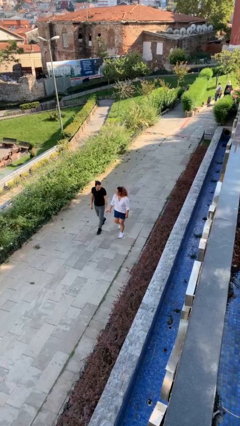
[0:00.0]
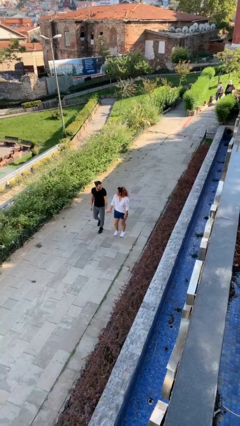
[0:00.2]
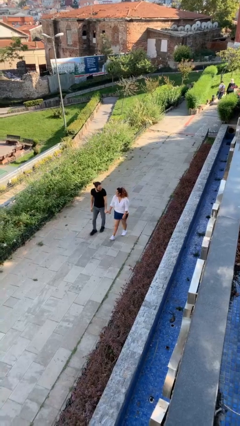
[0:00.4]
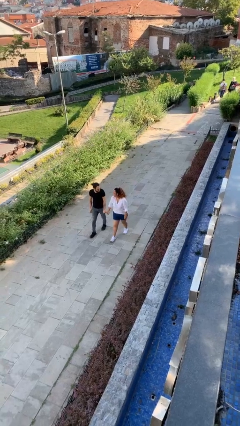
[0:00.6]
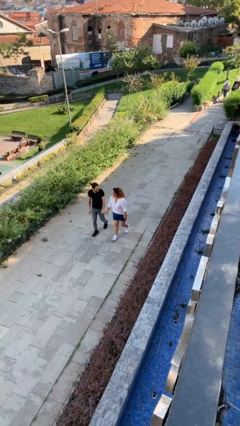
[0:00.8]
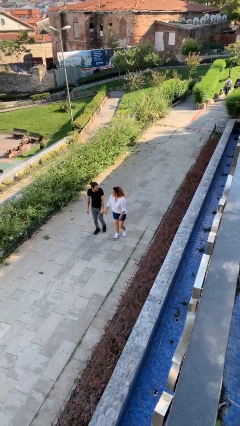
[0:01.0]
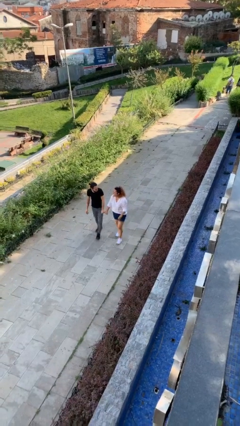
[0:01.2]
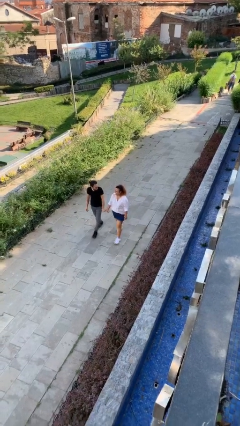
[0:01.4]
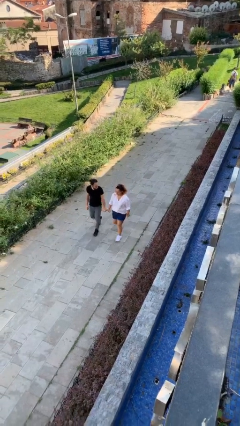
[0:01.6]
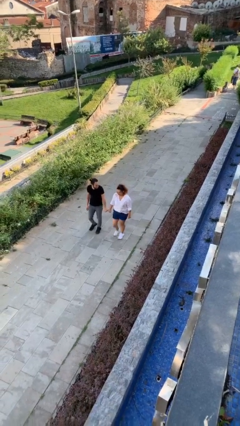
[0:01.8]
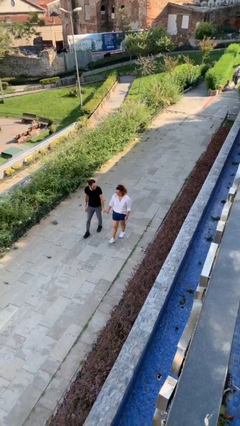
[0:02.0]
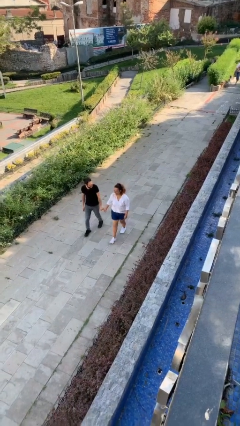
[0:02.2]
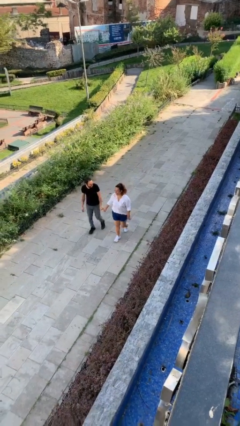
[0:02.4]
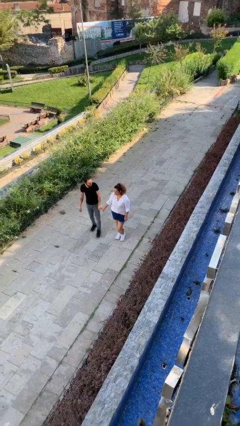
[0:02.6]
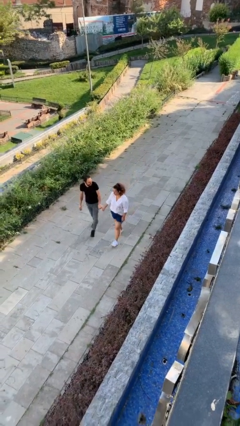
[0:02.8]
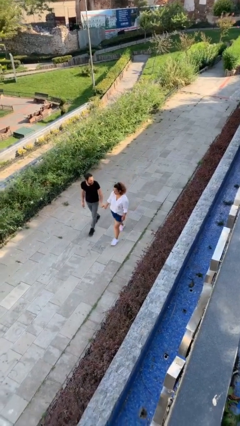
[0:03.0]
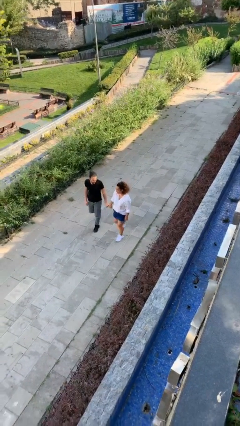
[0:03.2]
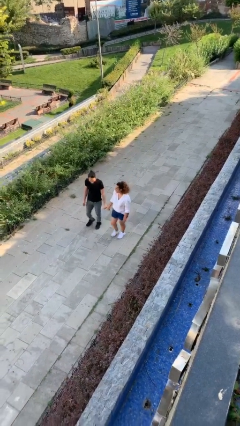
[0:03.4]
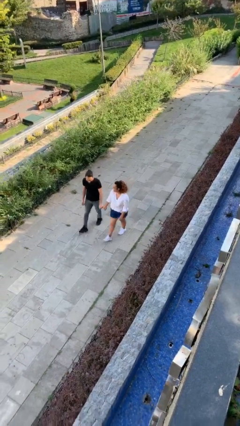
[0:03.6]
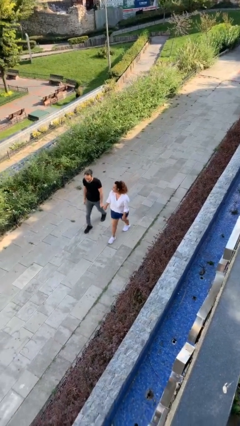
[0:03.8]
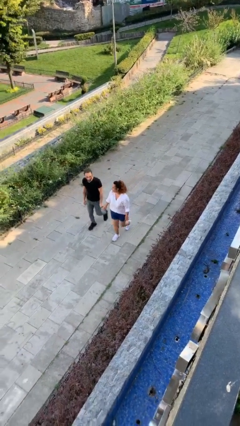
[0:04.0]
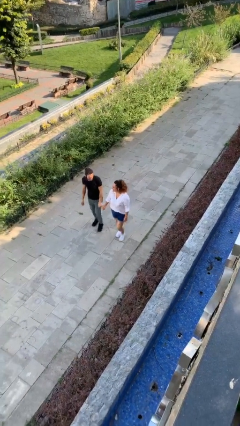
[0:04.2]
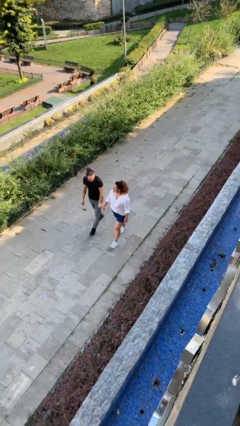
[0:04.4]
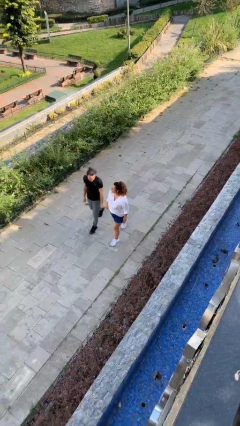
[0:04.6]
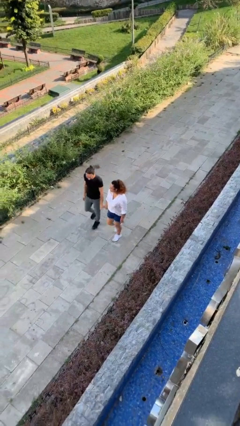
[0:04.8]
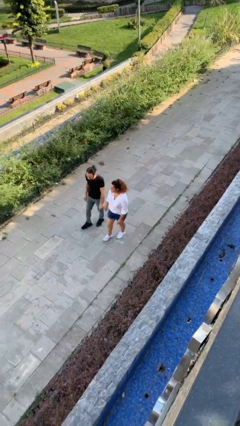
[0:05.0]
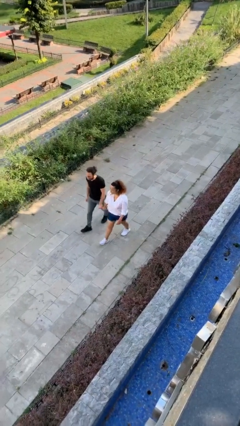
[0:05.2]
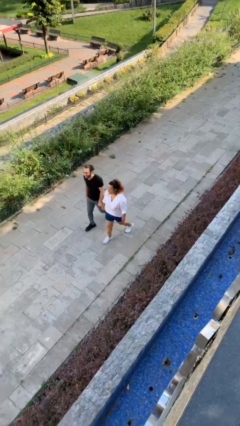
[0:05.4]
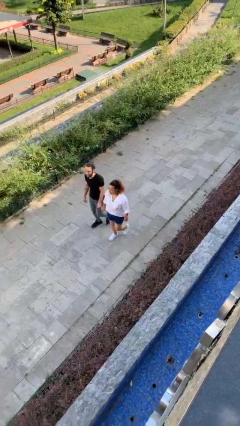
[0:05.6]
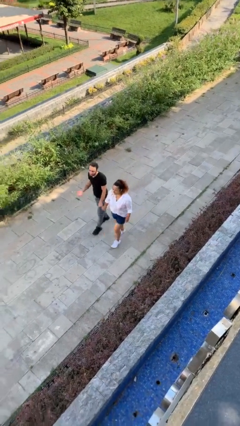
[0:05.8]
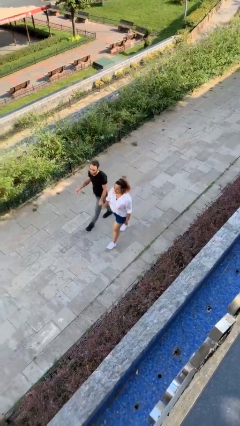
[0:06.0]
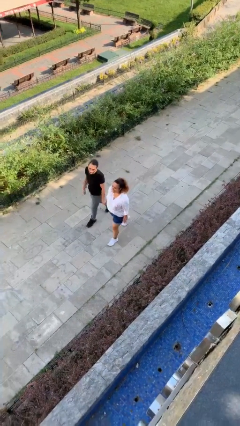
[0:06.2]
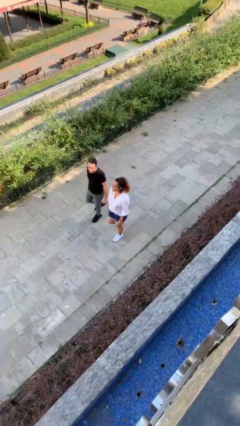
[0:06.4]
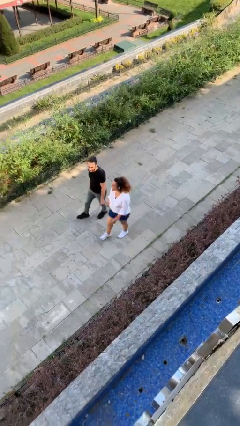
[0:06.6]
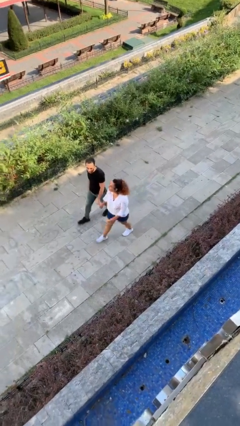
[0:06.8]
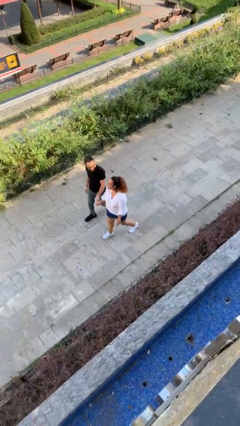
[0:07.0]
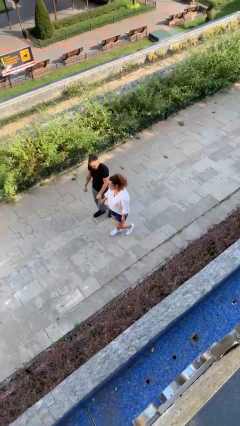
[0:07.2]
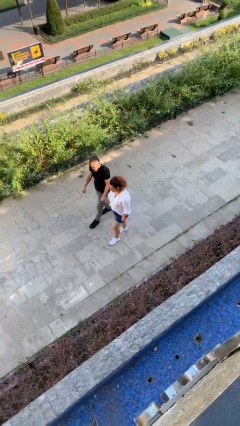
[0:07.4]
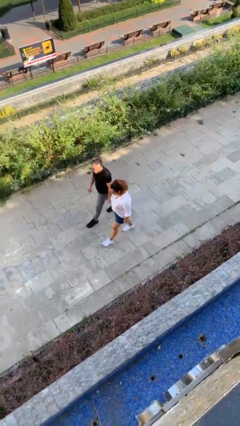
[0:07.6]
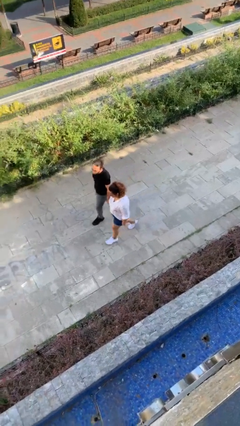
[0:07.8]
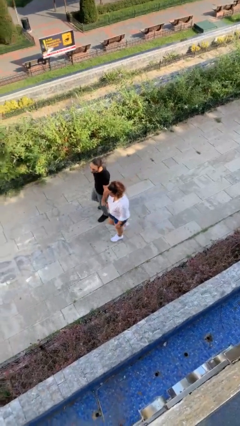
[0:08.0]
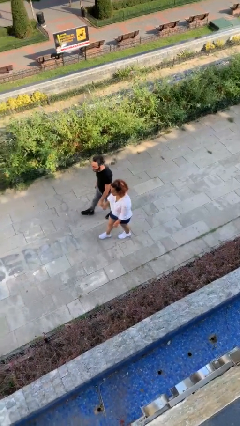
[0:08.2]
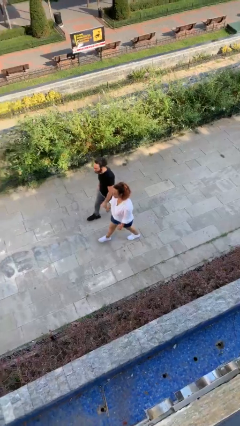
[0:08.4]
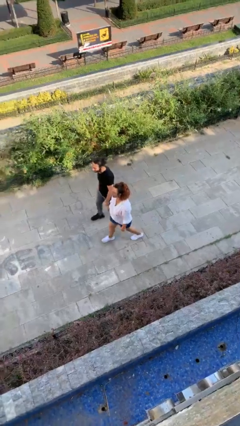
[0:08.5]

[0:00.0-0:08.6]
person holds hand

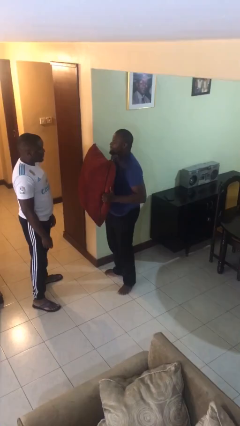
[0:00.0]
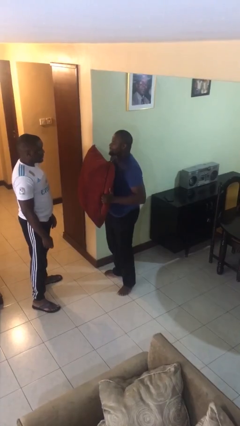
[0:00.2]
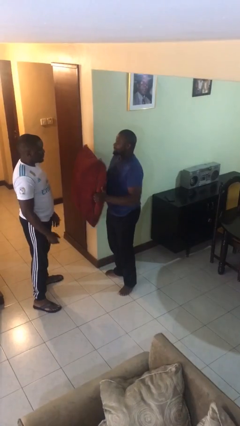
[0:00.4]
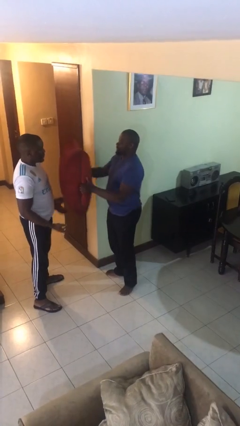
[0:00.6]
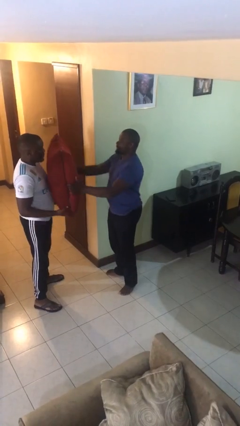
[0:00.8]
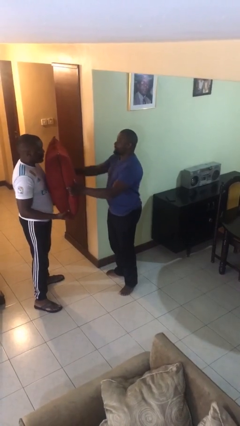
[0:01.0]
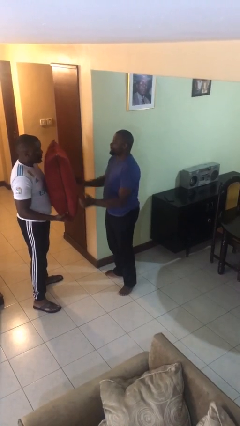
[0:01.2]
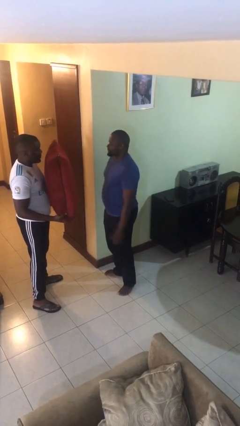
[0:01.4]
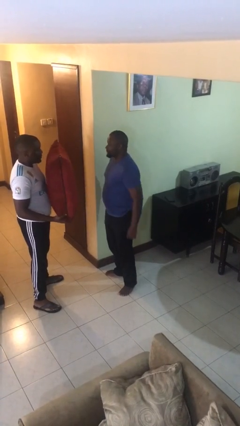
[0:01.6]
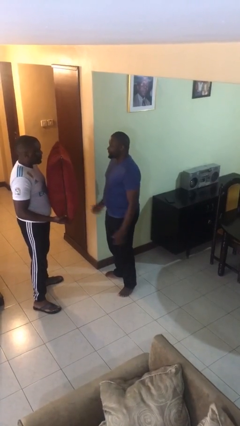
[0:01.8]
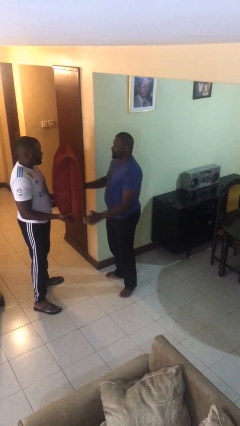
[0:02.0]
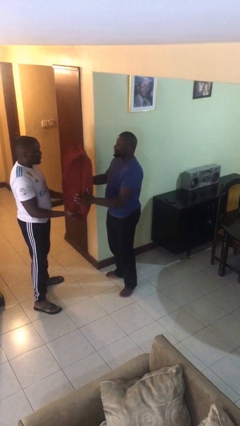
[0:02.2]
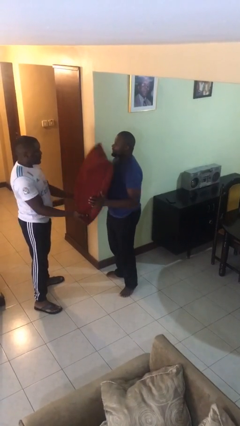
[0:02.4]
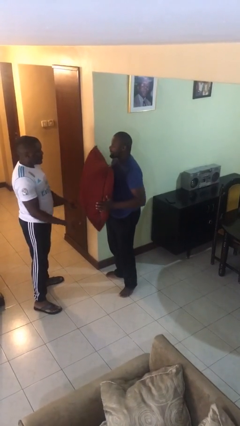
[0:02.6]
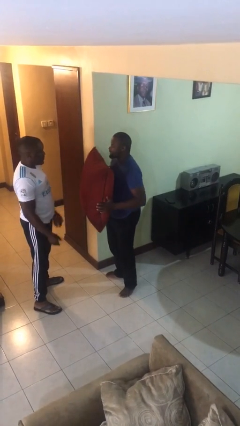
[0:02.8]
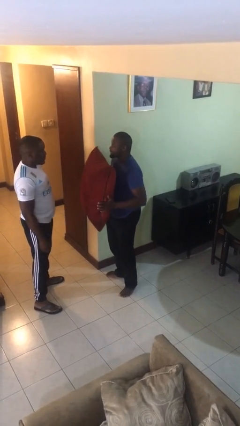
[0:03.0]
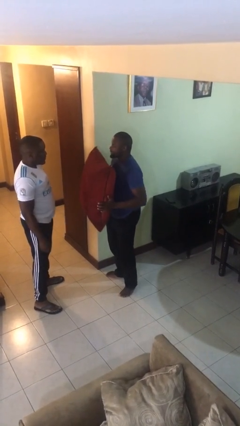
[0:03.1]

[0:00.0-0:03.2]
person transfers object to person

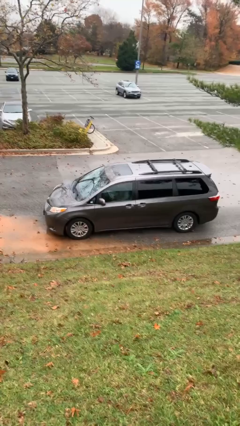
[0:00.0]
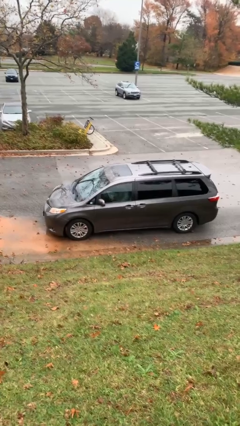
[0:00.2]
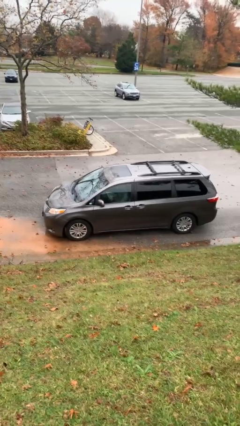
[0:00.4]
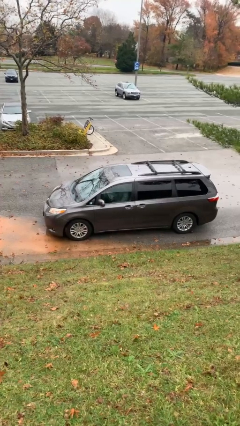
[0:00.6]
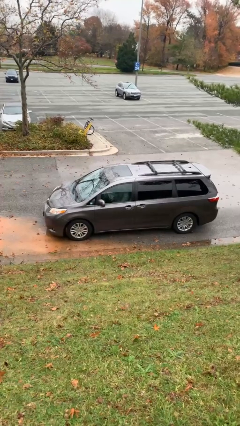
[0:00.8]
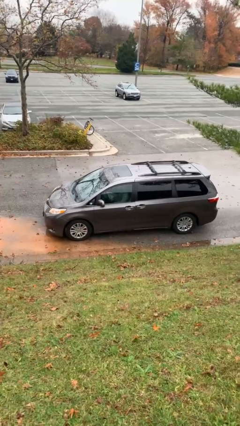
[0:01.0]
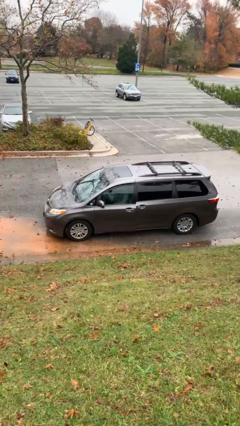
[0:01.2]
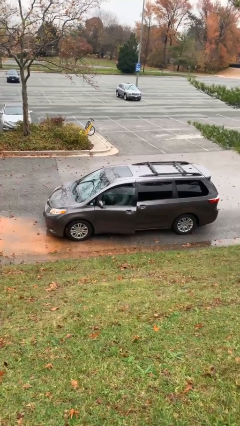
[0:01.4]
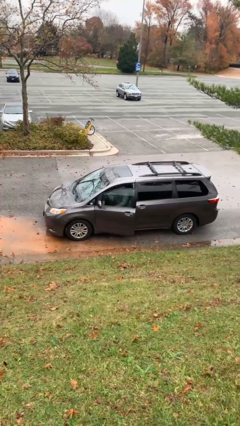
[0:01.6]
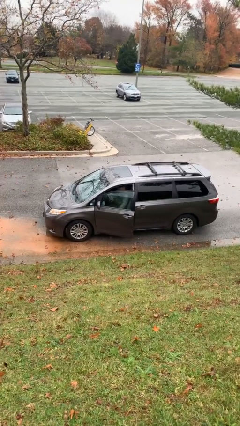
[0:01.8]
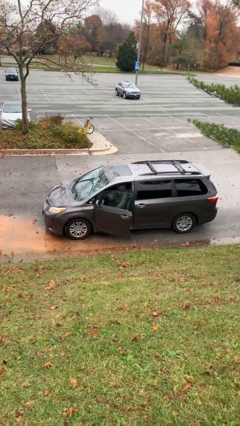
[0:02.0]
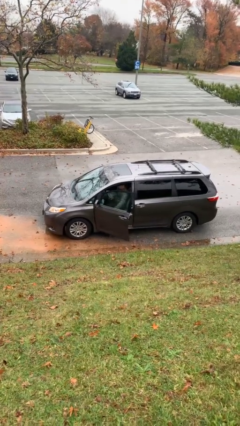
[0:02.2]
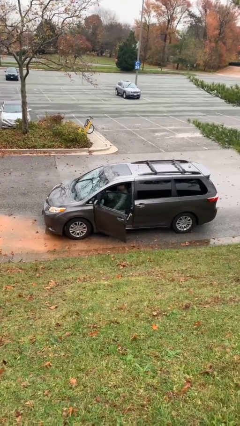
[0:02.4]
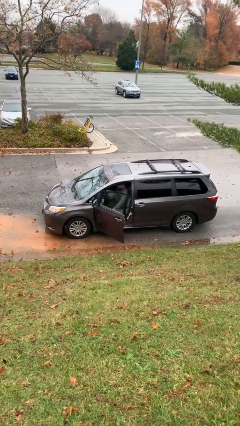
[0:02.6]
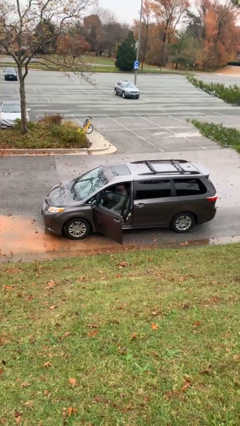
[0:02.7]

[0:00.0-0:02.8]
person opens car door

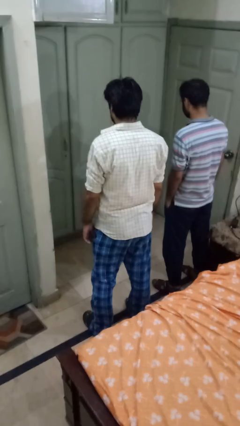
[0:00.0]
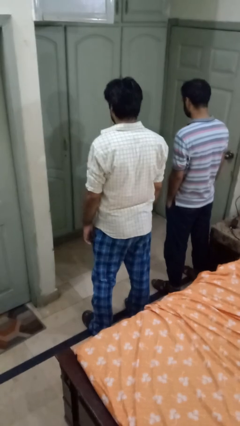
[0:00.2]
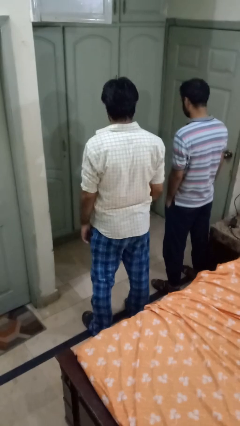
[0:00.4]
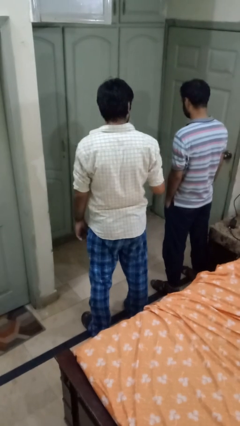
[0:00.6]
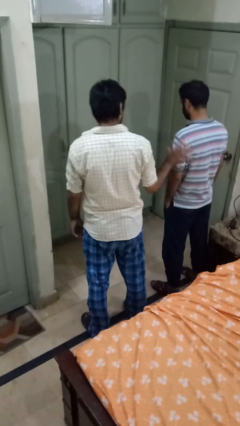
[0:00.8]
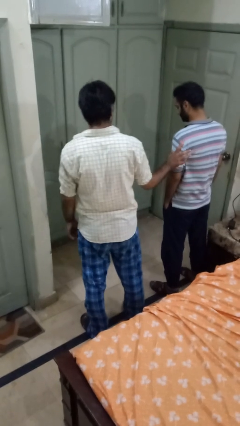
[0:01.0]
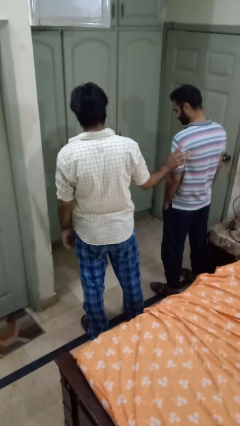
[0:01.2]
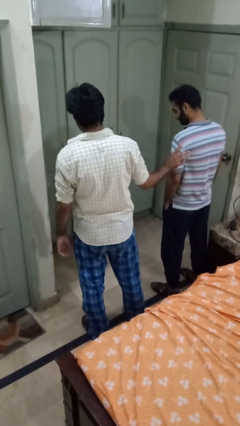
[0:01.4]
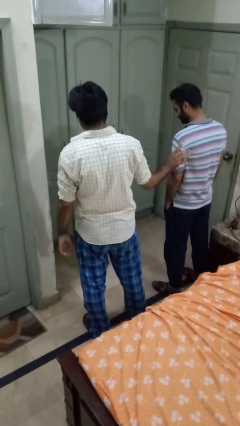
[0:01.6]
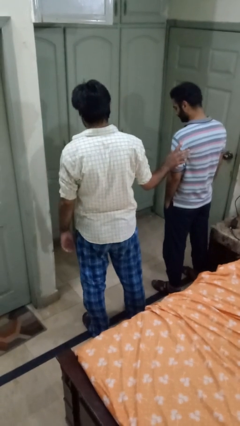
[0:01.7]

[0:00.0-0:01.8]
person grabs person by bicep

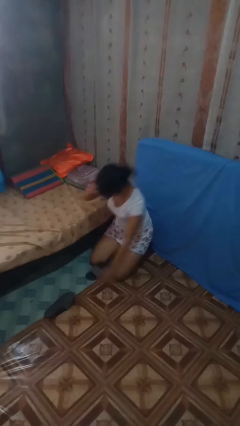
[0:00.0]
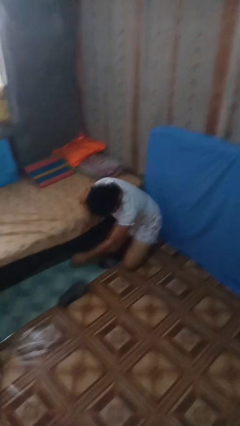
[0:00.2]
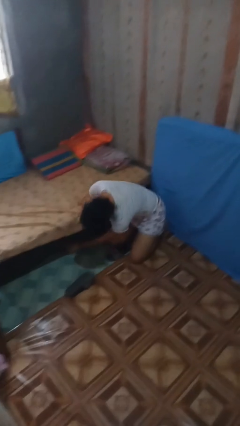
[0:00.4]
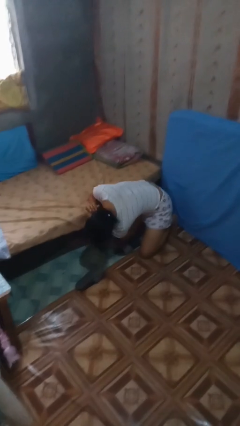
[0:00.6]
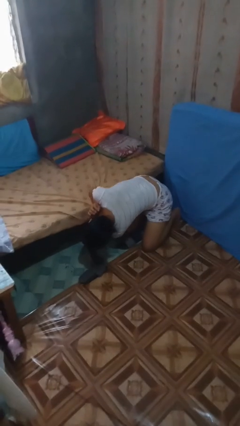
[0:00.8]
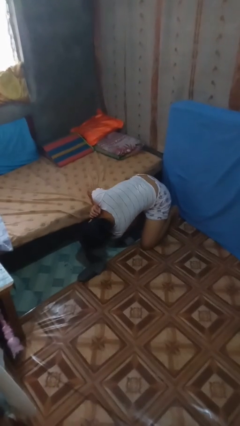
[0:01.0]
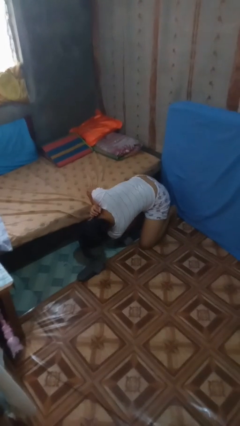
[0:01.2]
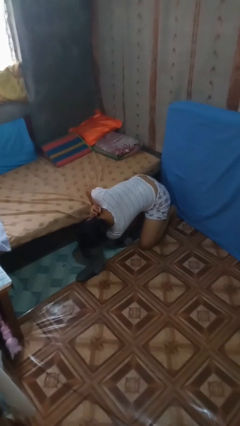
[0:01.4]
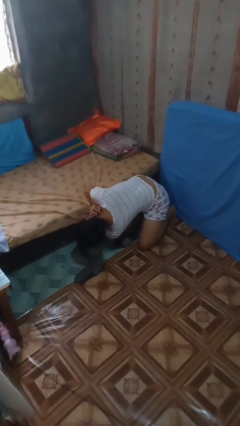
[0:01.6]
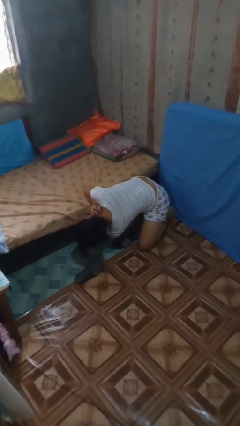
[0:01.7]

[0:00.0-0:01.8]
person searches under bed
